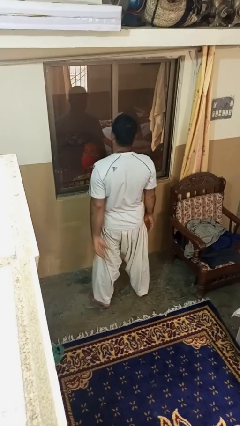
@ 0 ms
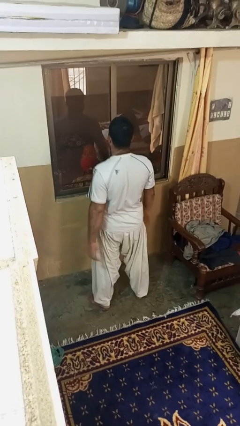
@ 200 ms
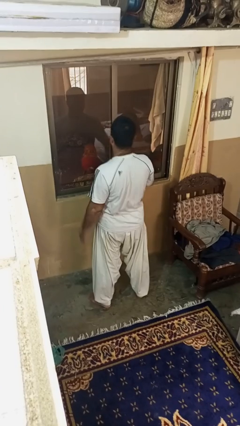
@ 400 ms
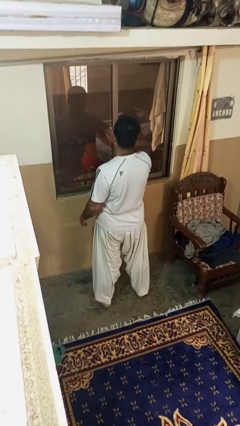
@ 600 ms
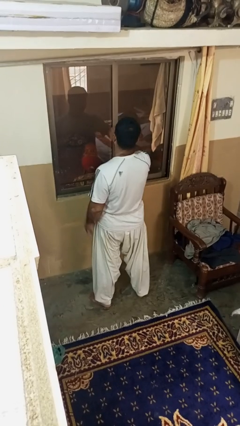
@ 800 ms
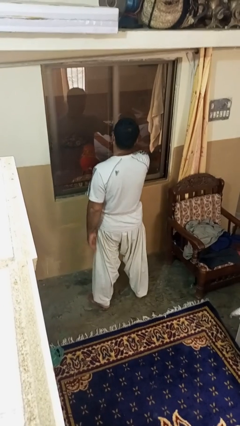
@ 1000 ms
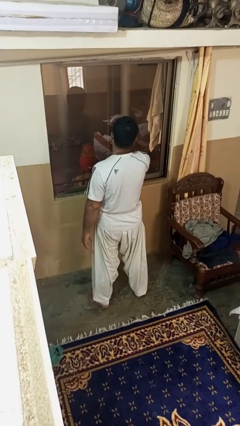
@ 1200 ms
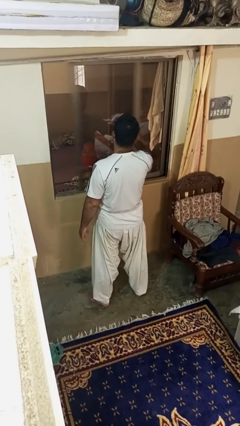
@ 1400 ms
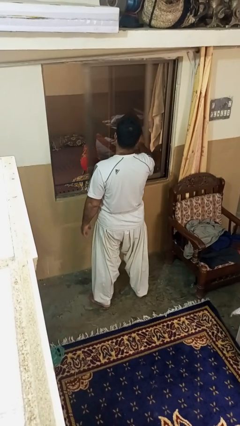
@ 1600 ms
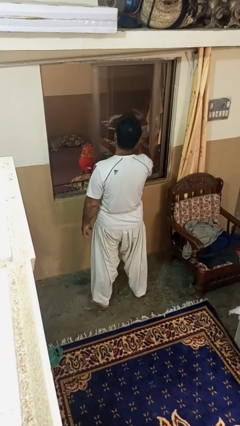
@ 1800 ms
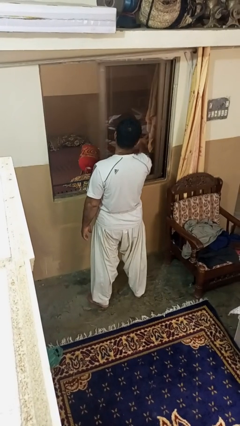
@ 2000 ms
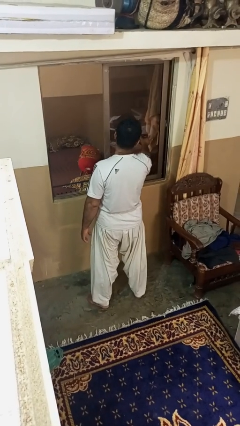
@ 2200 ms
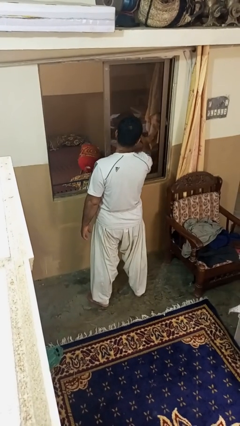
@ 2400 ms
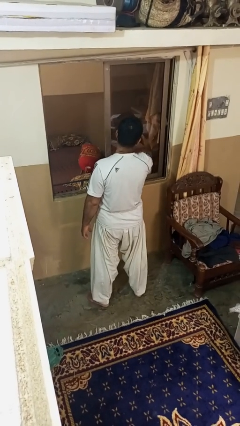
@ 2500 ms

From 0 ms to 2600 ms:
person opens home window

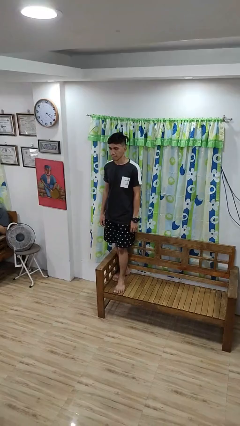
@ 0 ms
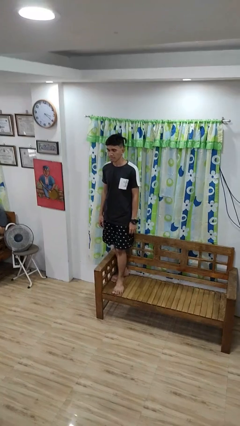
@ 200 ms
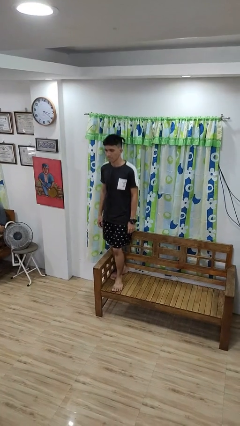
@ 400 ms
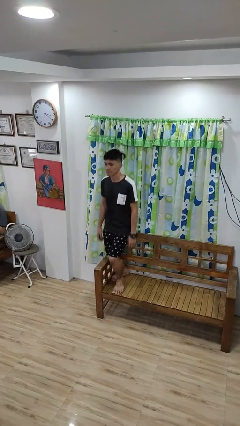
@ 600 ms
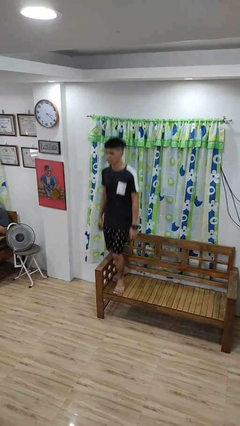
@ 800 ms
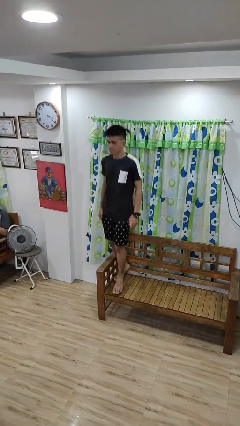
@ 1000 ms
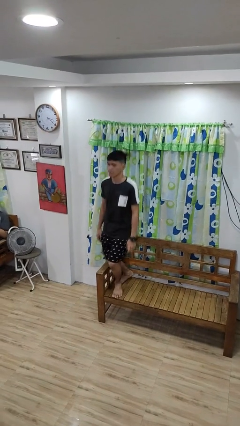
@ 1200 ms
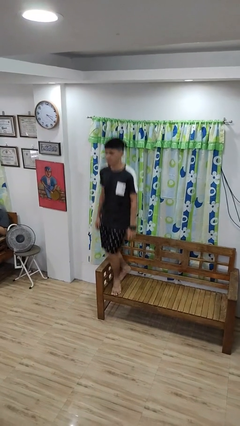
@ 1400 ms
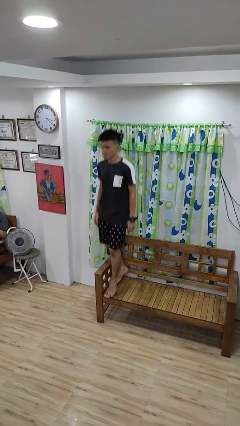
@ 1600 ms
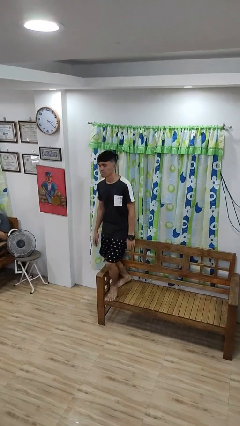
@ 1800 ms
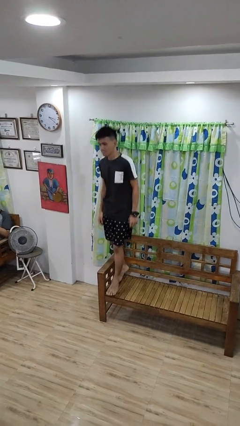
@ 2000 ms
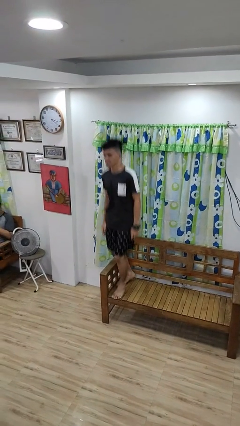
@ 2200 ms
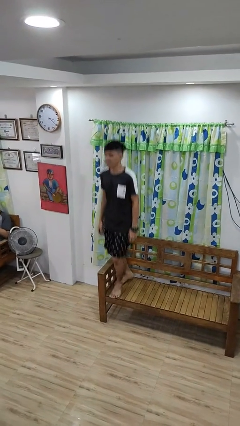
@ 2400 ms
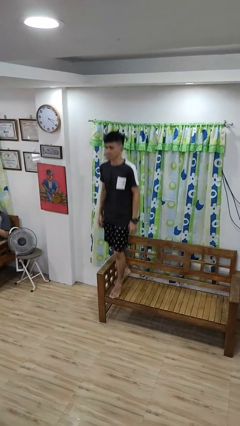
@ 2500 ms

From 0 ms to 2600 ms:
person jumps on couch

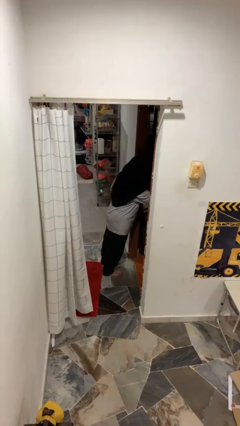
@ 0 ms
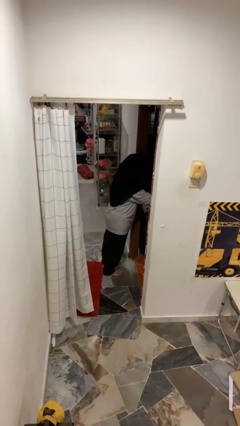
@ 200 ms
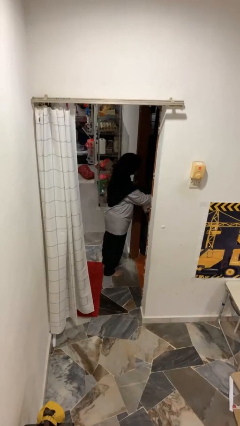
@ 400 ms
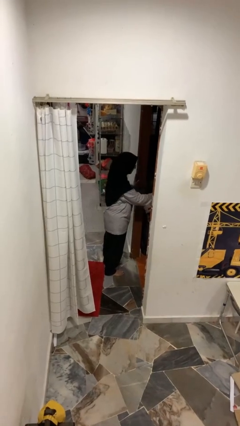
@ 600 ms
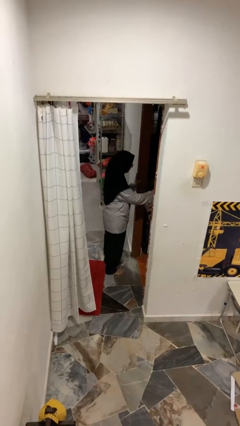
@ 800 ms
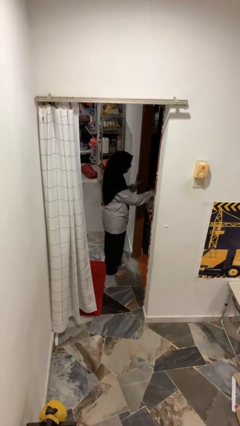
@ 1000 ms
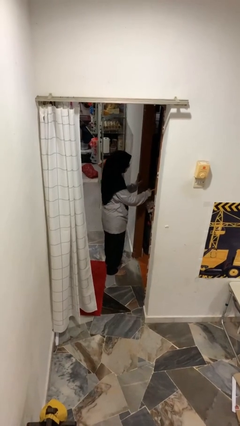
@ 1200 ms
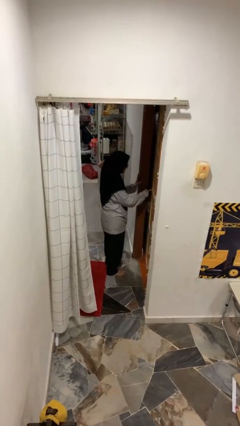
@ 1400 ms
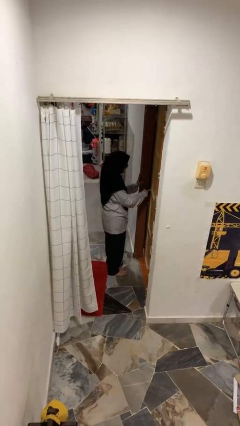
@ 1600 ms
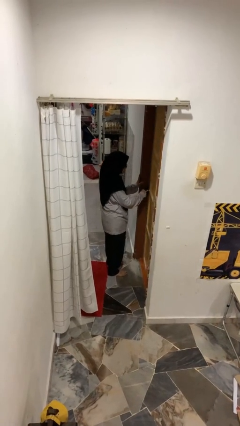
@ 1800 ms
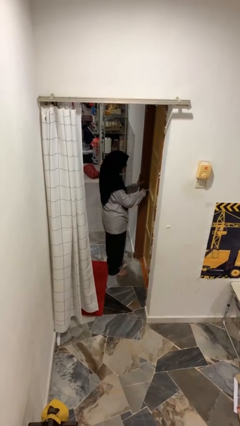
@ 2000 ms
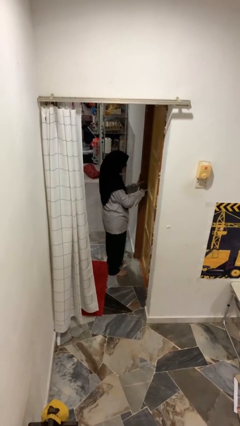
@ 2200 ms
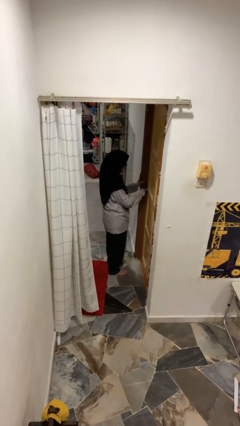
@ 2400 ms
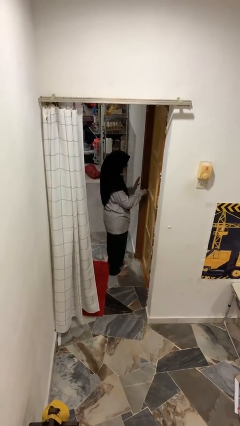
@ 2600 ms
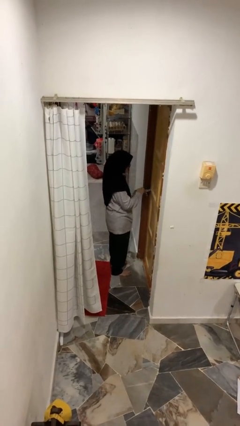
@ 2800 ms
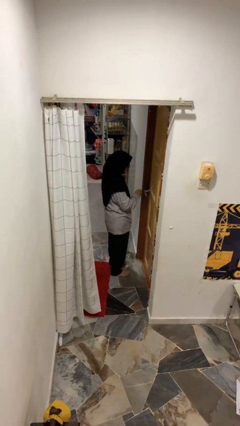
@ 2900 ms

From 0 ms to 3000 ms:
person closes facility door

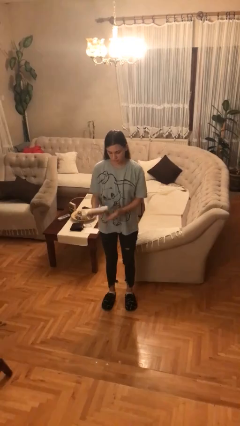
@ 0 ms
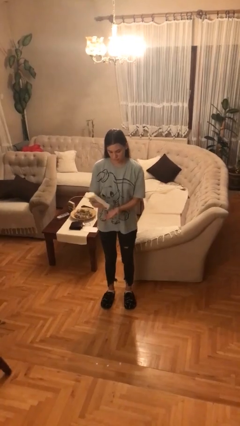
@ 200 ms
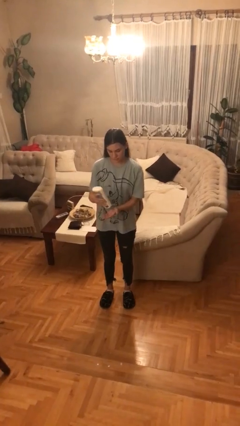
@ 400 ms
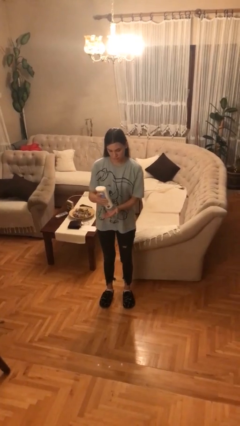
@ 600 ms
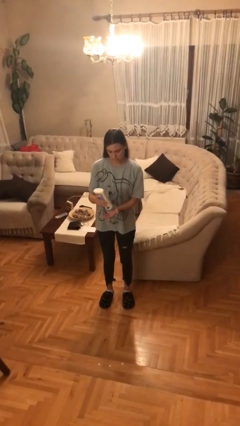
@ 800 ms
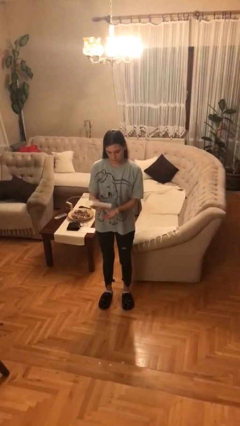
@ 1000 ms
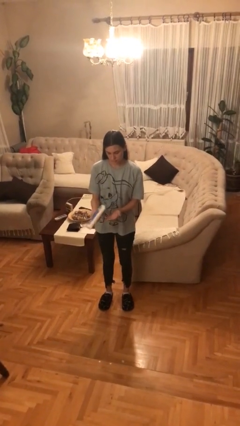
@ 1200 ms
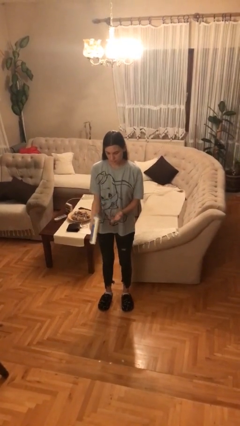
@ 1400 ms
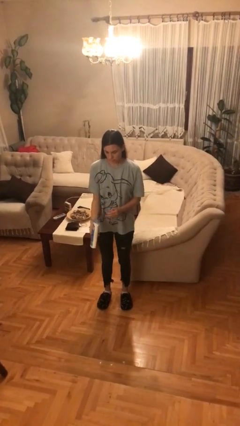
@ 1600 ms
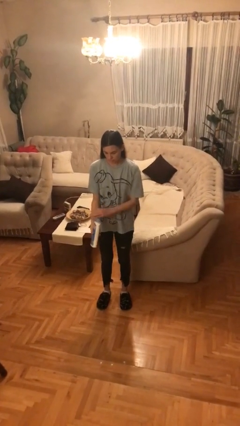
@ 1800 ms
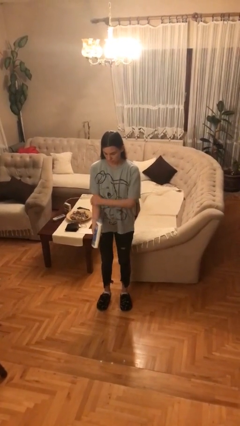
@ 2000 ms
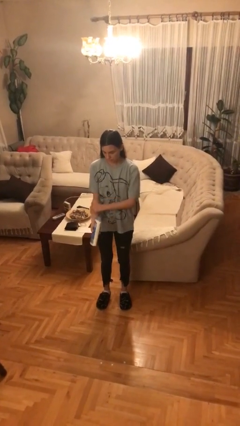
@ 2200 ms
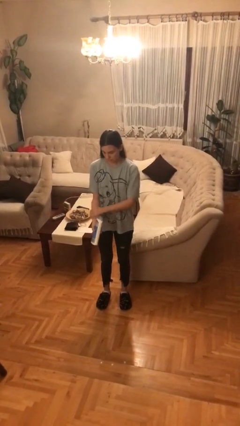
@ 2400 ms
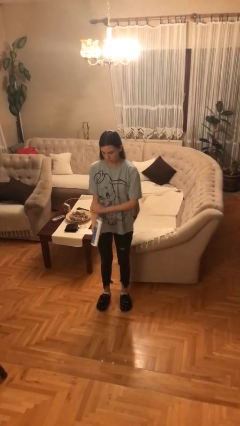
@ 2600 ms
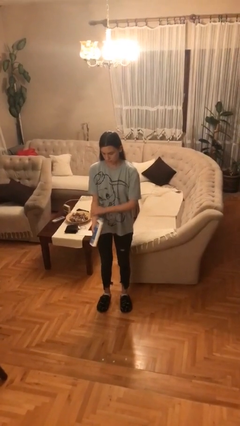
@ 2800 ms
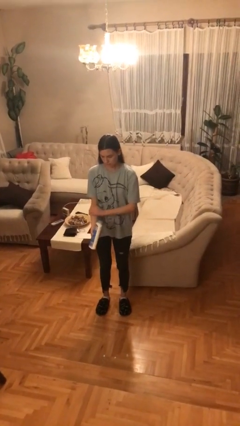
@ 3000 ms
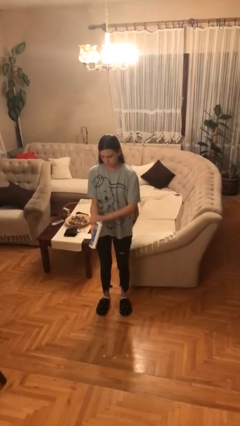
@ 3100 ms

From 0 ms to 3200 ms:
person applies sunscreen

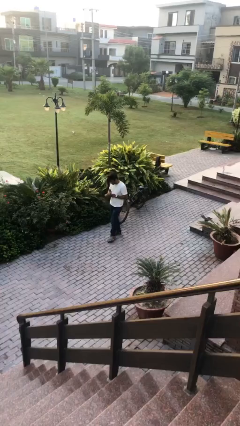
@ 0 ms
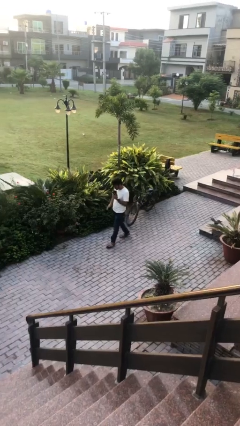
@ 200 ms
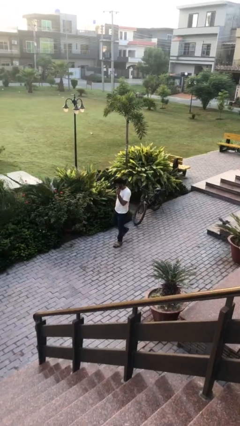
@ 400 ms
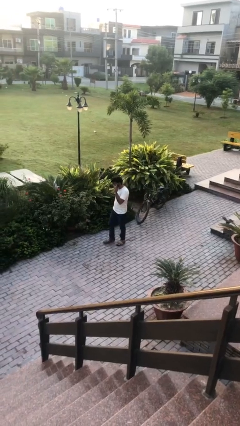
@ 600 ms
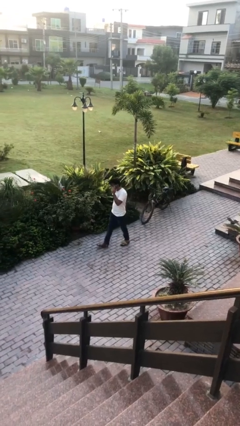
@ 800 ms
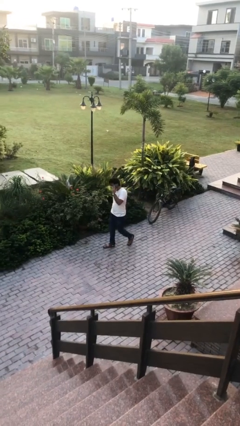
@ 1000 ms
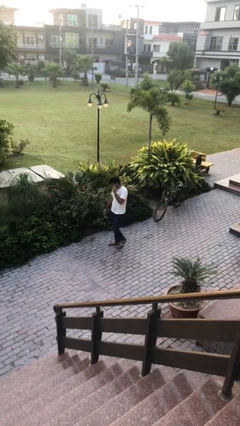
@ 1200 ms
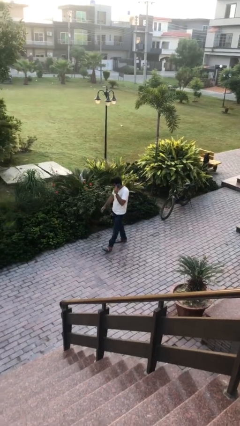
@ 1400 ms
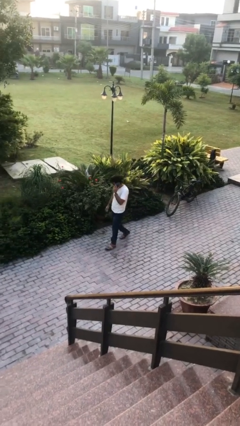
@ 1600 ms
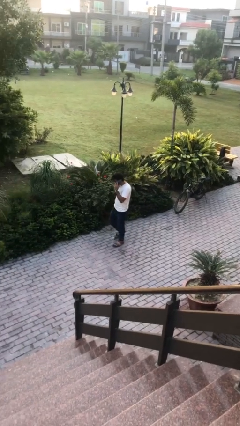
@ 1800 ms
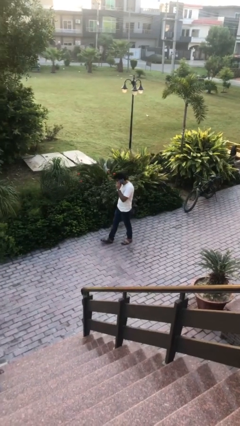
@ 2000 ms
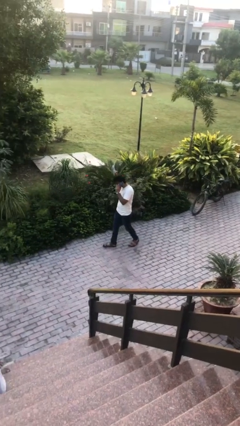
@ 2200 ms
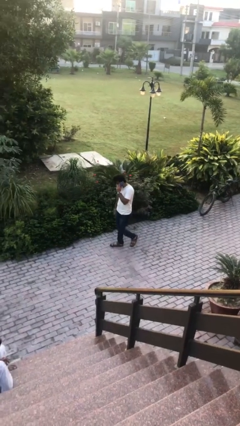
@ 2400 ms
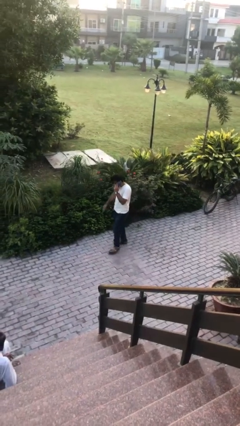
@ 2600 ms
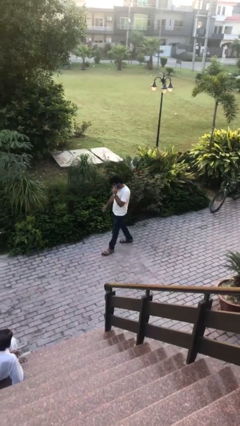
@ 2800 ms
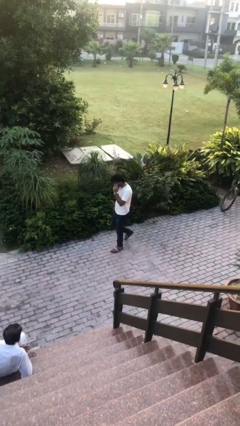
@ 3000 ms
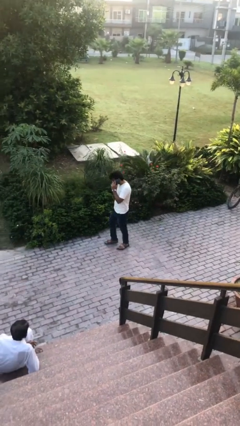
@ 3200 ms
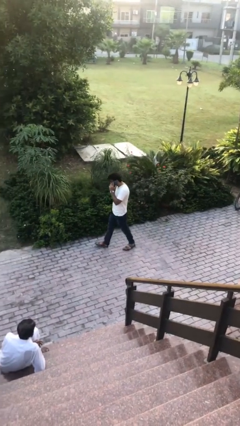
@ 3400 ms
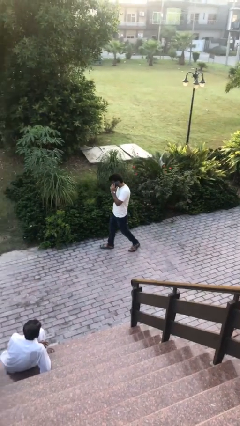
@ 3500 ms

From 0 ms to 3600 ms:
person talks on phone

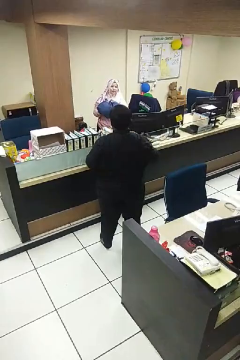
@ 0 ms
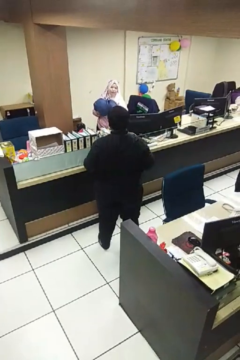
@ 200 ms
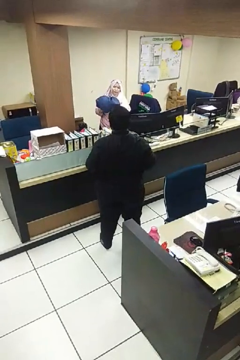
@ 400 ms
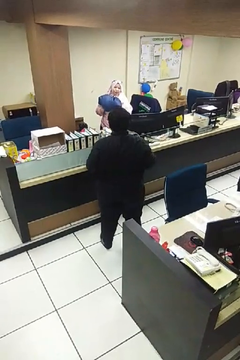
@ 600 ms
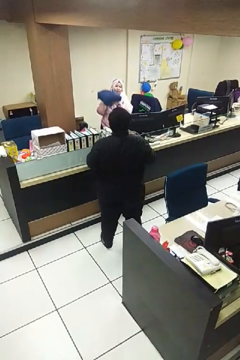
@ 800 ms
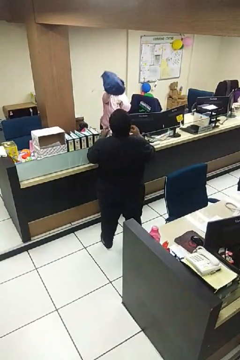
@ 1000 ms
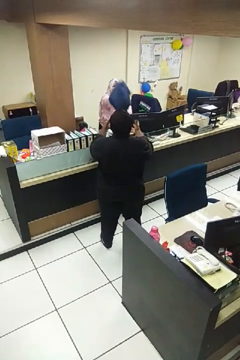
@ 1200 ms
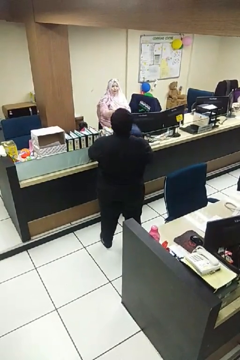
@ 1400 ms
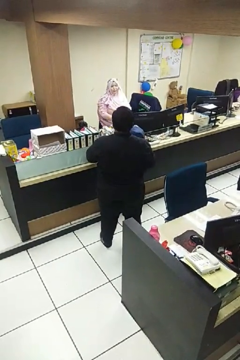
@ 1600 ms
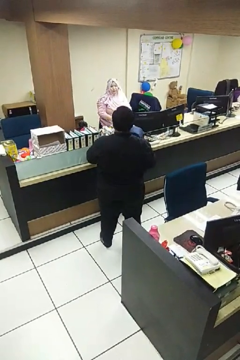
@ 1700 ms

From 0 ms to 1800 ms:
person catches object from person

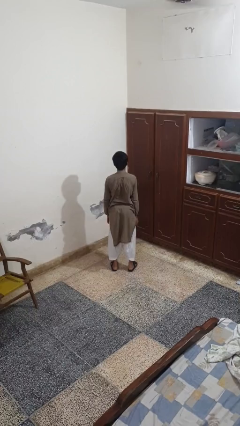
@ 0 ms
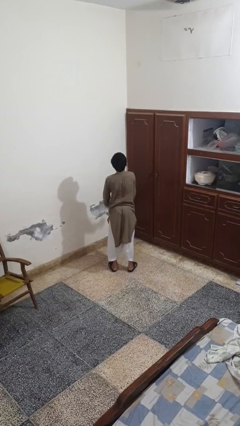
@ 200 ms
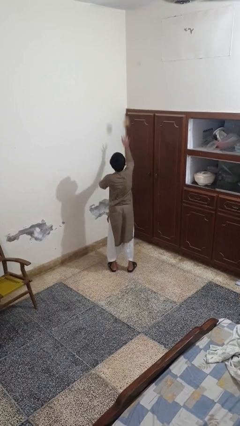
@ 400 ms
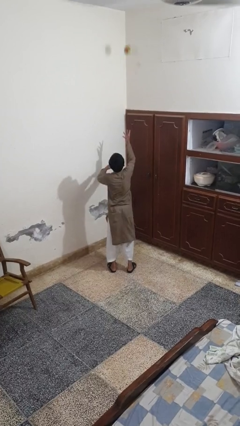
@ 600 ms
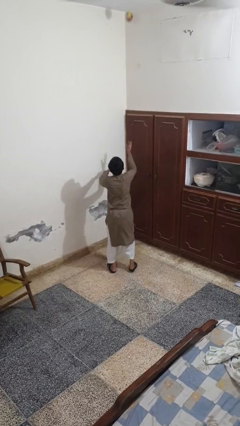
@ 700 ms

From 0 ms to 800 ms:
person drops object
